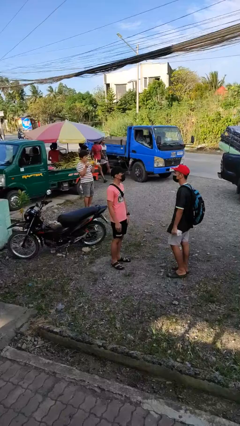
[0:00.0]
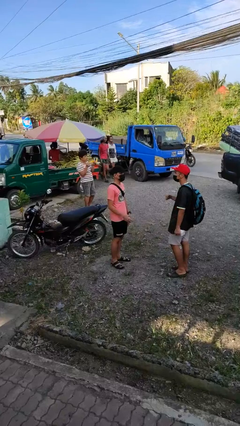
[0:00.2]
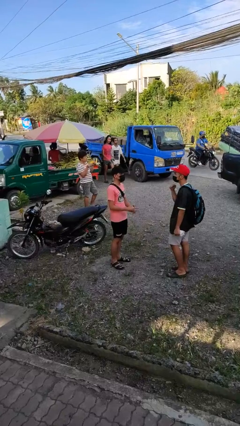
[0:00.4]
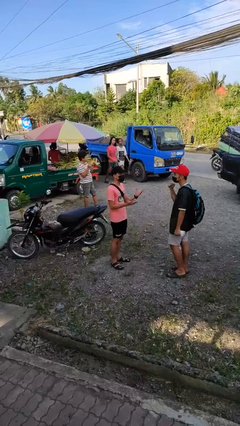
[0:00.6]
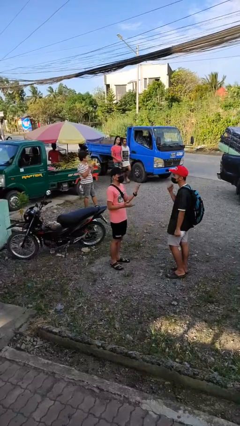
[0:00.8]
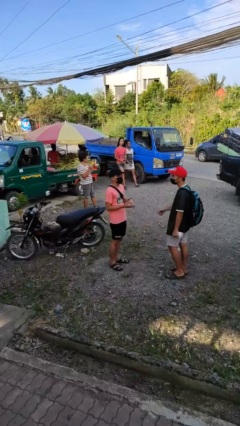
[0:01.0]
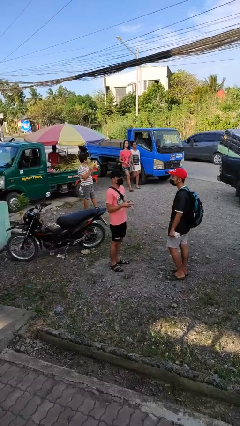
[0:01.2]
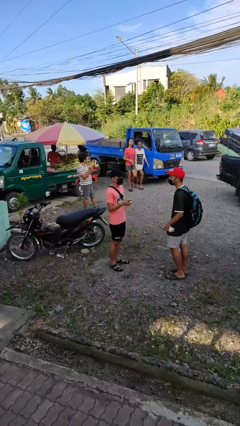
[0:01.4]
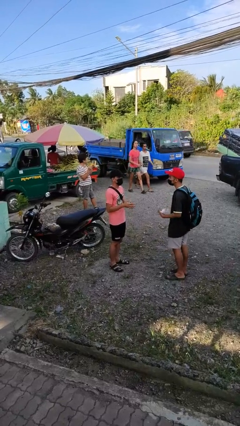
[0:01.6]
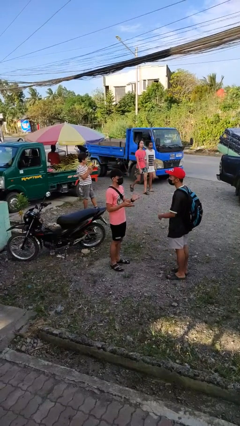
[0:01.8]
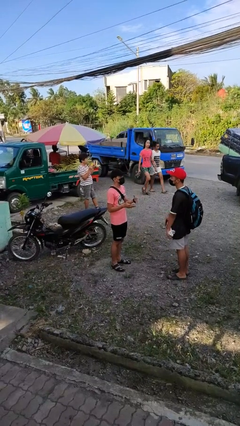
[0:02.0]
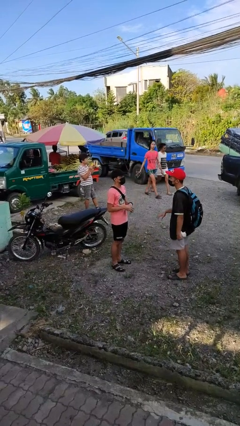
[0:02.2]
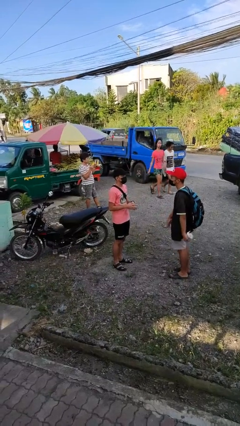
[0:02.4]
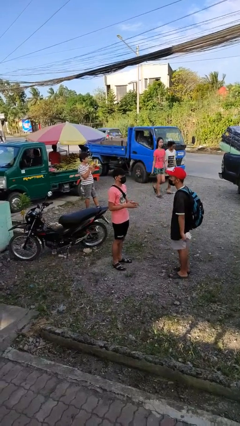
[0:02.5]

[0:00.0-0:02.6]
person talks to person

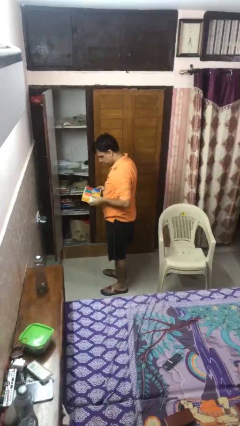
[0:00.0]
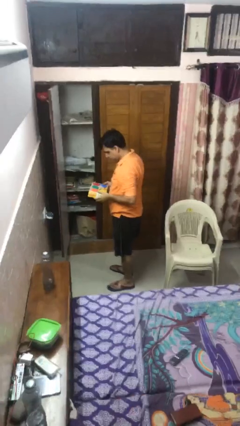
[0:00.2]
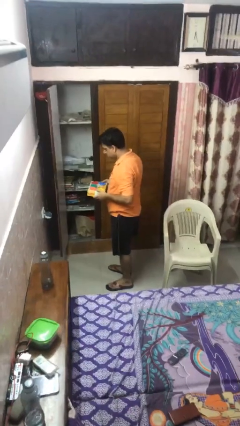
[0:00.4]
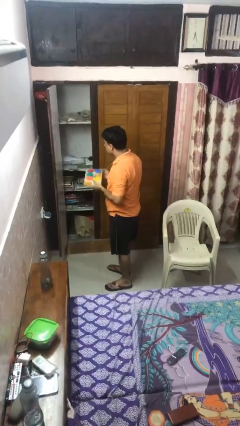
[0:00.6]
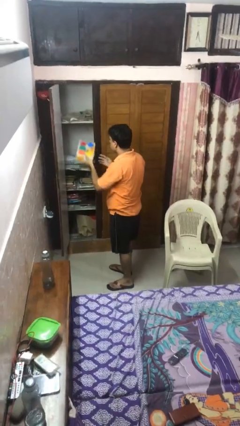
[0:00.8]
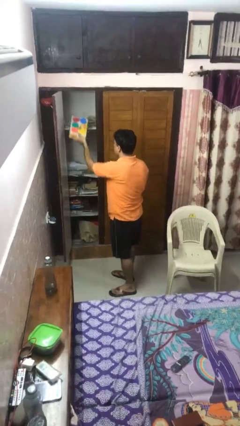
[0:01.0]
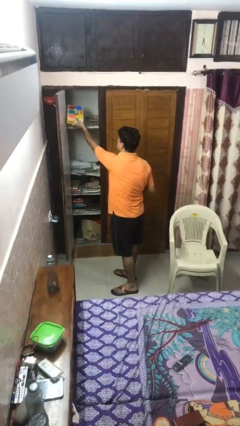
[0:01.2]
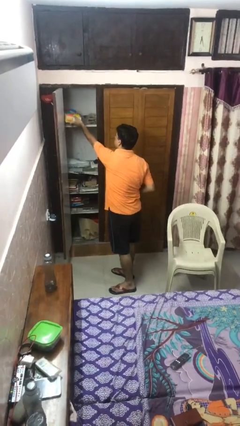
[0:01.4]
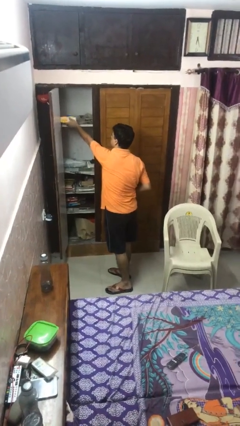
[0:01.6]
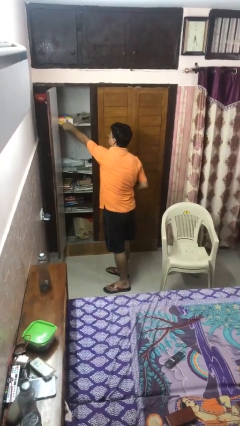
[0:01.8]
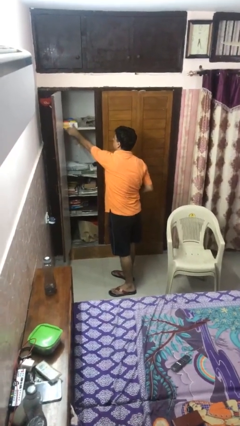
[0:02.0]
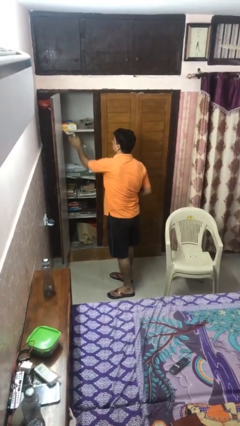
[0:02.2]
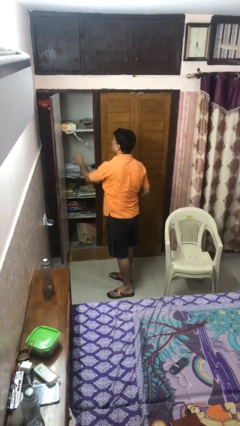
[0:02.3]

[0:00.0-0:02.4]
person puts down object on shelf

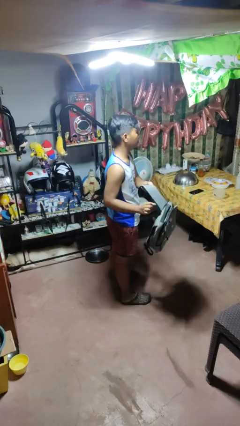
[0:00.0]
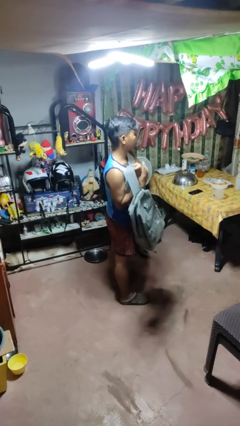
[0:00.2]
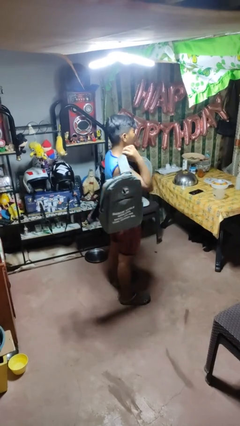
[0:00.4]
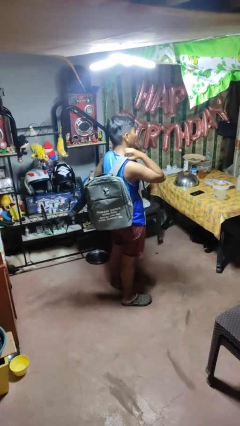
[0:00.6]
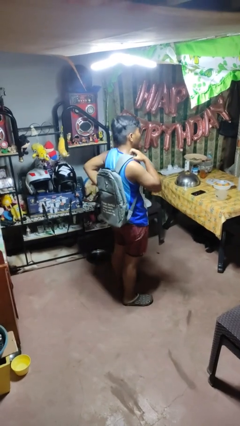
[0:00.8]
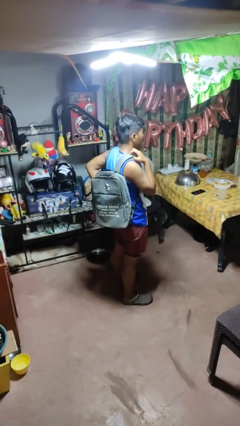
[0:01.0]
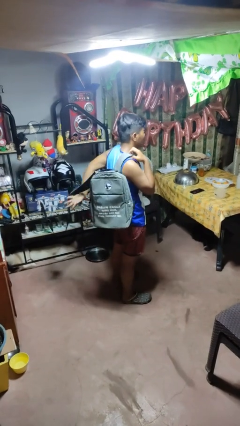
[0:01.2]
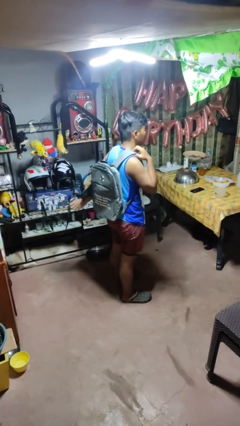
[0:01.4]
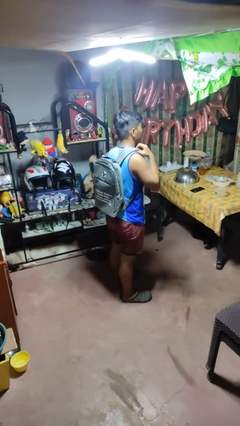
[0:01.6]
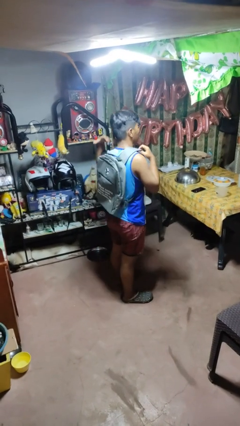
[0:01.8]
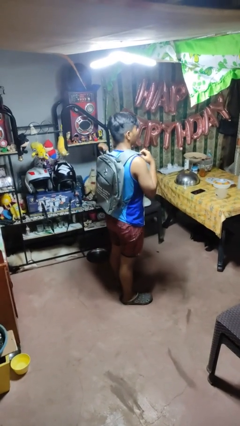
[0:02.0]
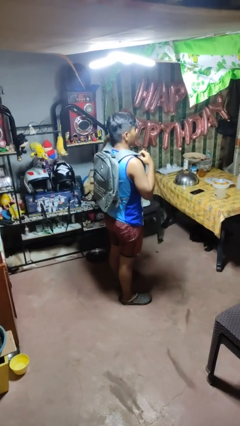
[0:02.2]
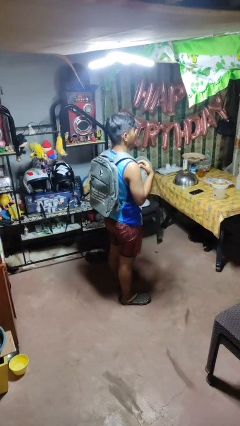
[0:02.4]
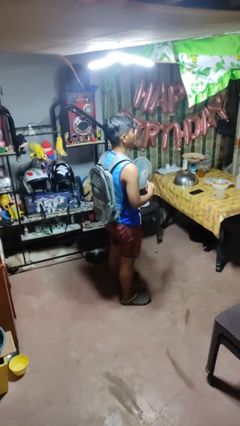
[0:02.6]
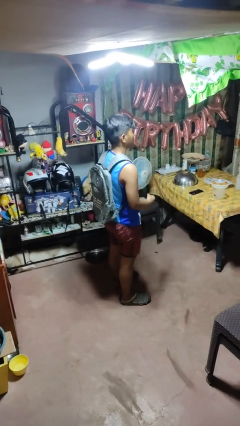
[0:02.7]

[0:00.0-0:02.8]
person puts on backpack

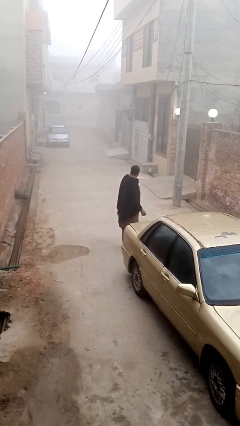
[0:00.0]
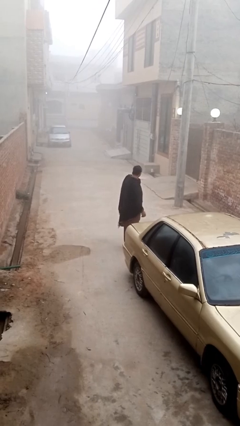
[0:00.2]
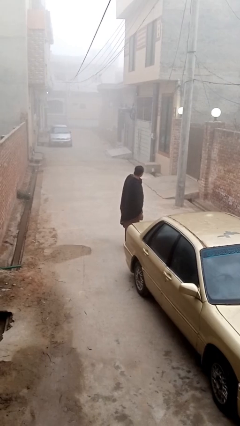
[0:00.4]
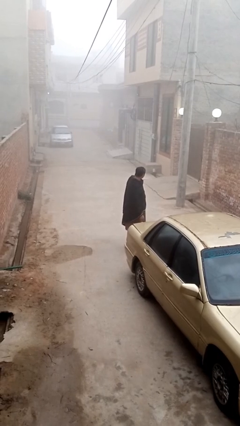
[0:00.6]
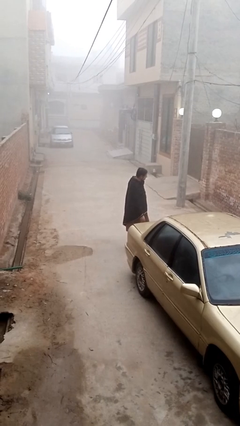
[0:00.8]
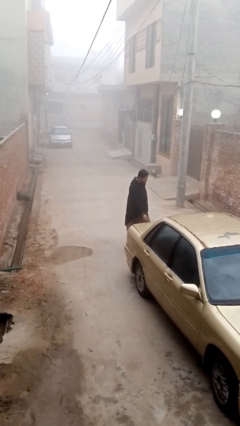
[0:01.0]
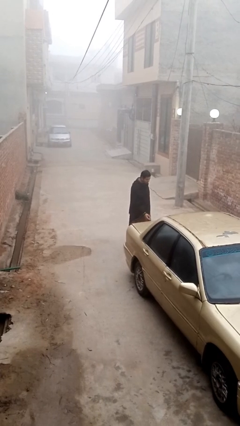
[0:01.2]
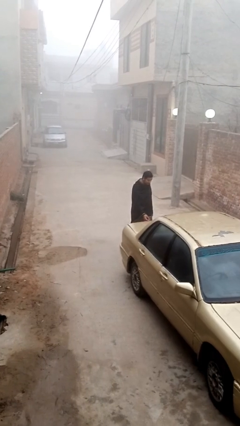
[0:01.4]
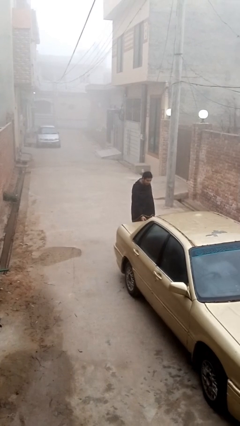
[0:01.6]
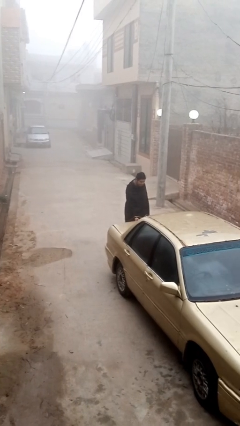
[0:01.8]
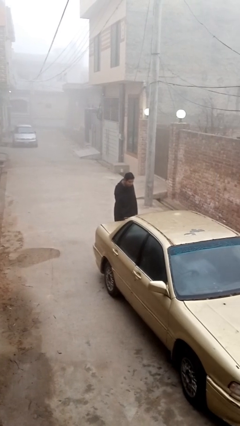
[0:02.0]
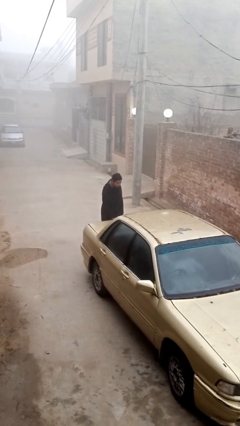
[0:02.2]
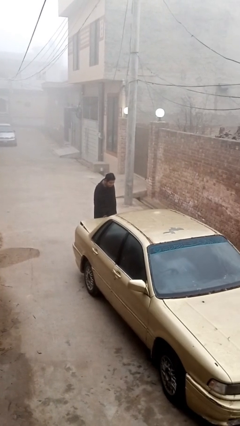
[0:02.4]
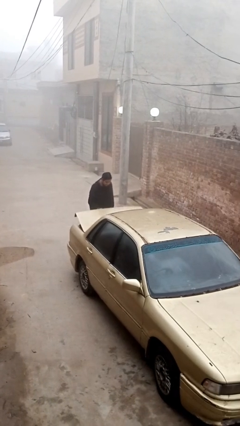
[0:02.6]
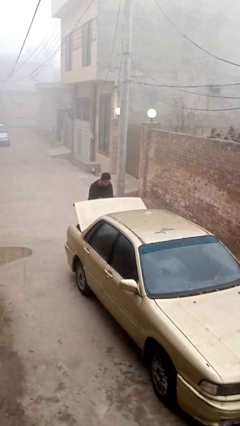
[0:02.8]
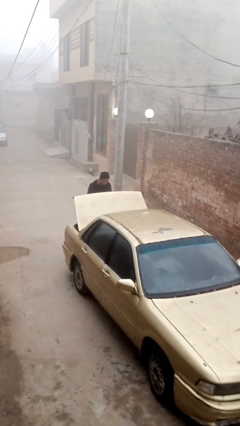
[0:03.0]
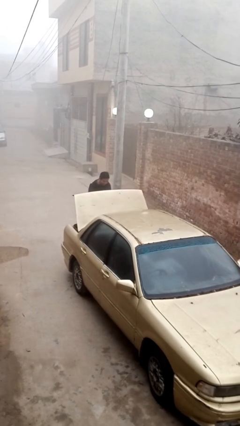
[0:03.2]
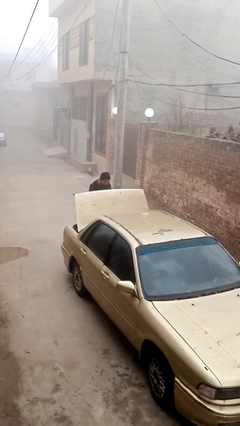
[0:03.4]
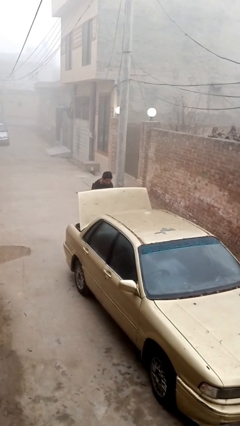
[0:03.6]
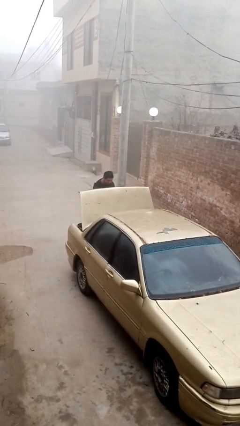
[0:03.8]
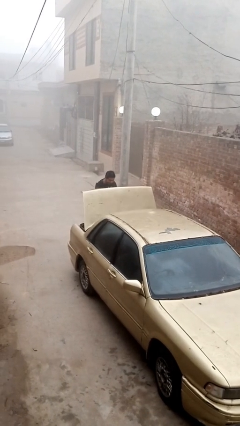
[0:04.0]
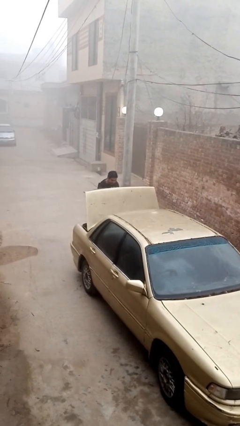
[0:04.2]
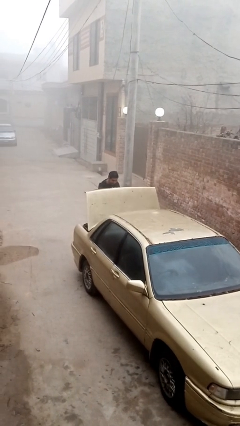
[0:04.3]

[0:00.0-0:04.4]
person opens car trunk

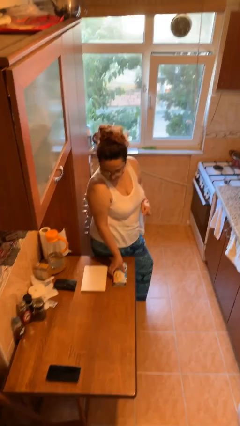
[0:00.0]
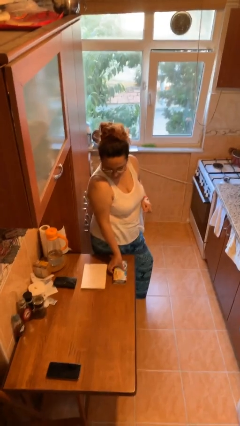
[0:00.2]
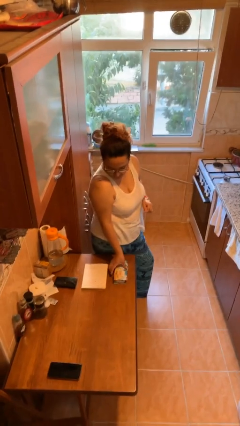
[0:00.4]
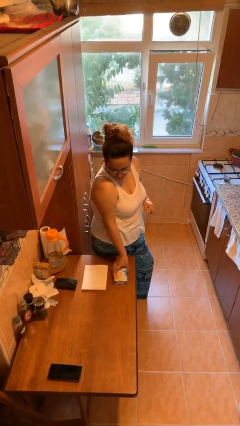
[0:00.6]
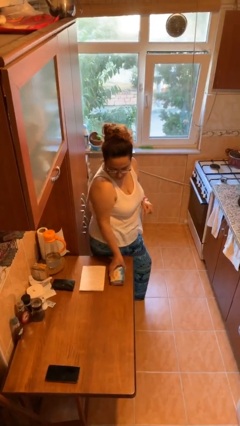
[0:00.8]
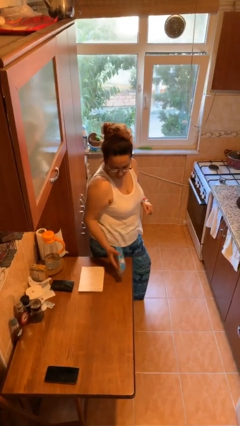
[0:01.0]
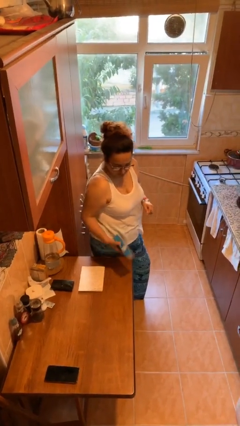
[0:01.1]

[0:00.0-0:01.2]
person picks up object from table

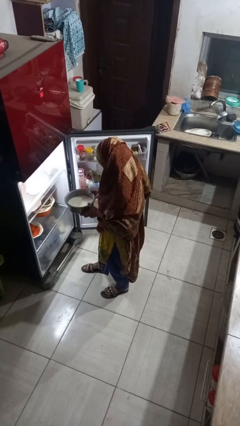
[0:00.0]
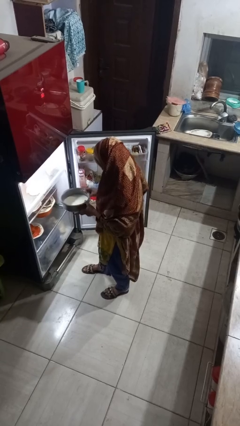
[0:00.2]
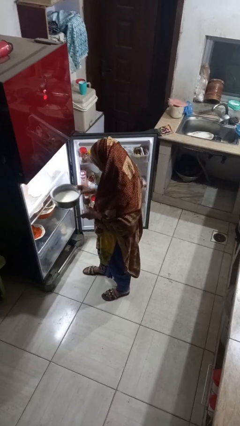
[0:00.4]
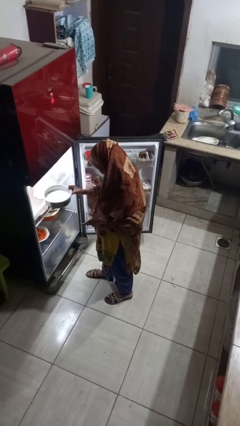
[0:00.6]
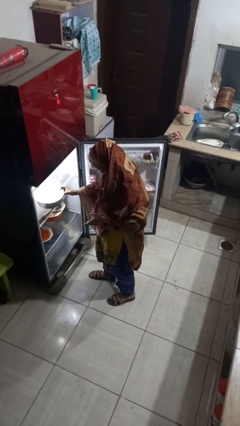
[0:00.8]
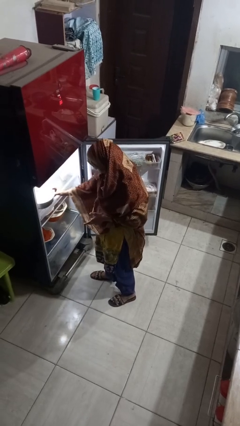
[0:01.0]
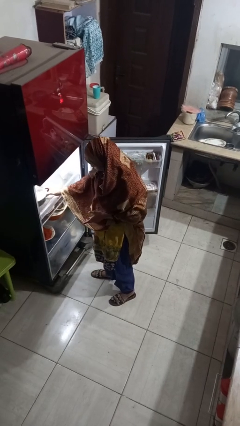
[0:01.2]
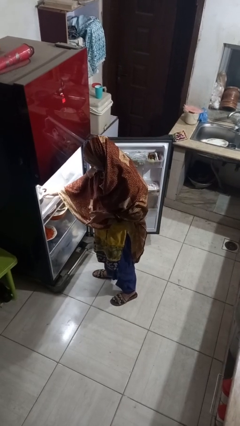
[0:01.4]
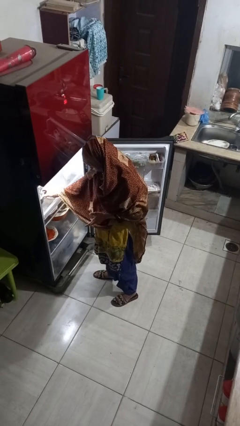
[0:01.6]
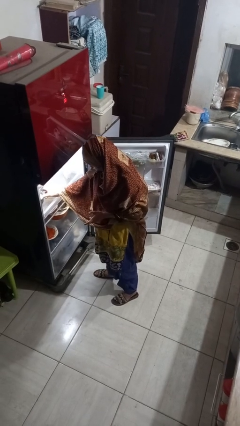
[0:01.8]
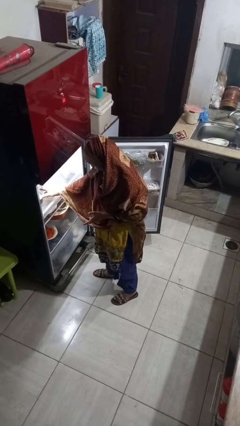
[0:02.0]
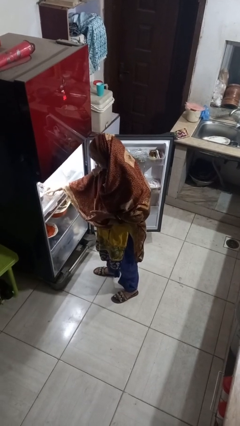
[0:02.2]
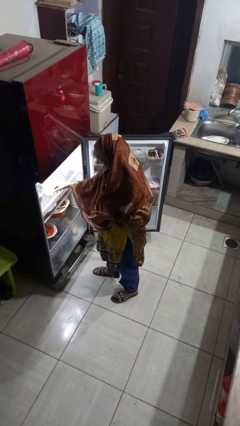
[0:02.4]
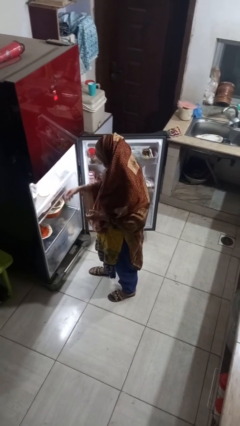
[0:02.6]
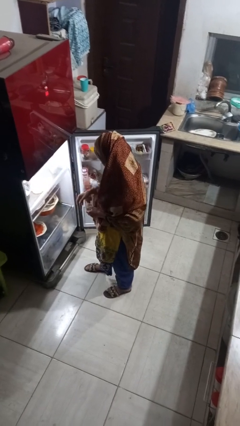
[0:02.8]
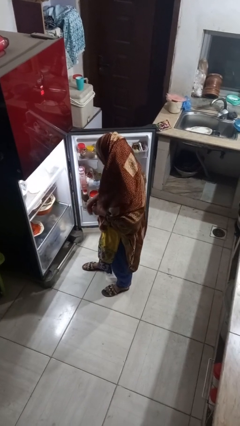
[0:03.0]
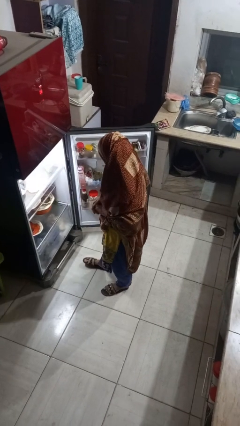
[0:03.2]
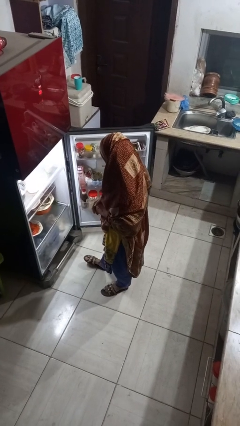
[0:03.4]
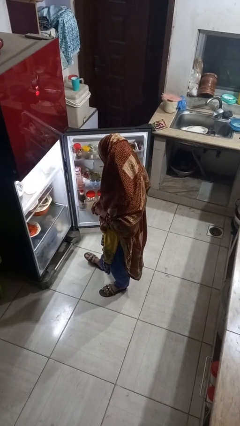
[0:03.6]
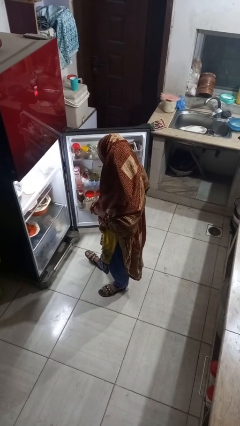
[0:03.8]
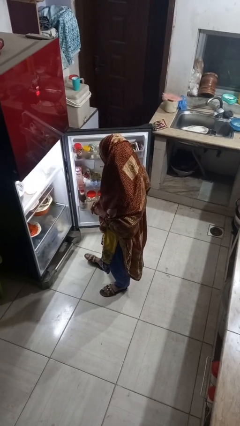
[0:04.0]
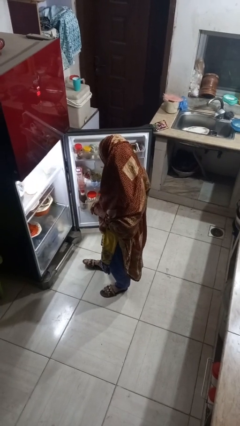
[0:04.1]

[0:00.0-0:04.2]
person puts object into refrigerator
